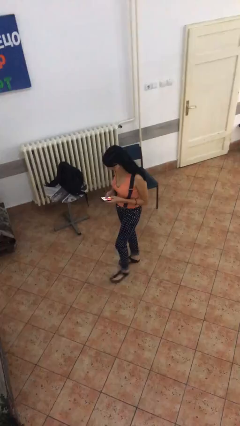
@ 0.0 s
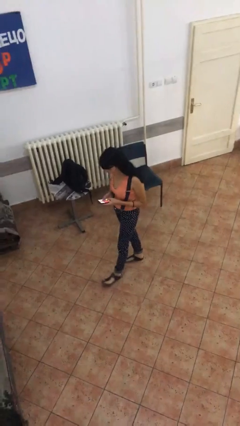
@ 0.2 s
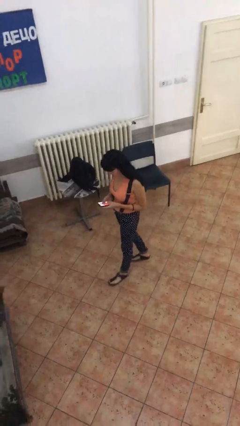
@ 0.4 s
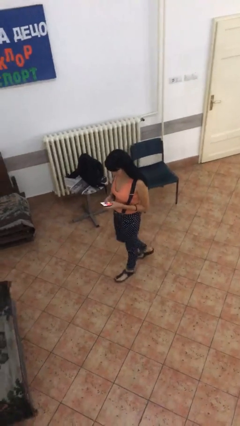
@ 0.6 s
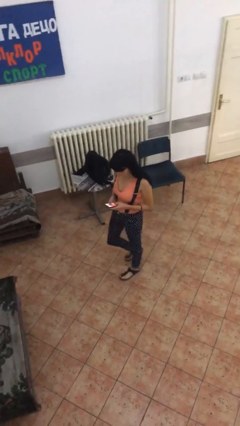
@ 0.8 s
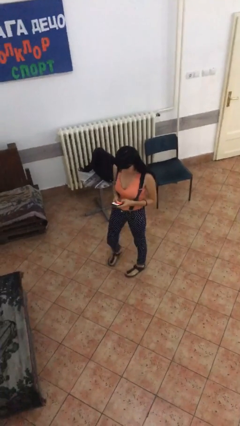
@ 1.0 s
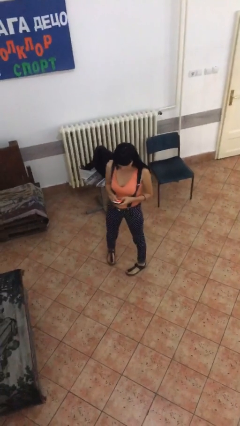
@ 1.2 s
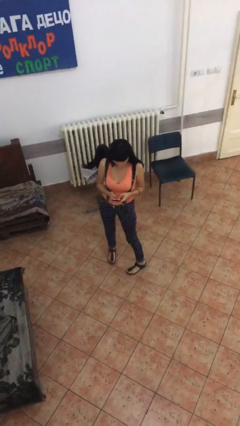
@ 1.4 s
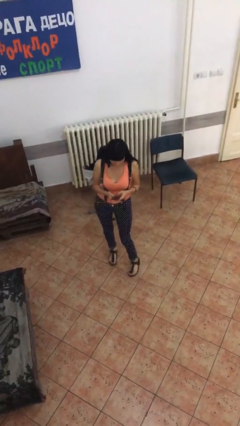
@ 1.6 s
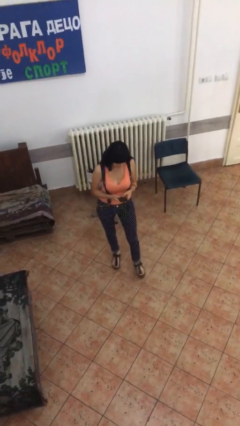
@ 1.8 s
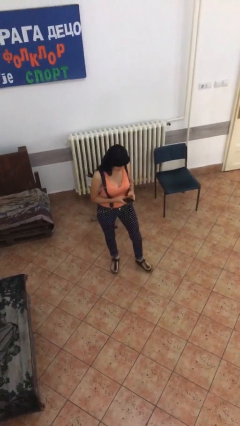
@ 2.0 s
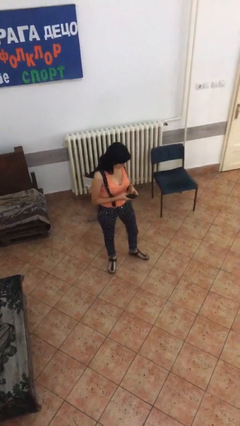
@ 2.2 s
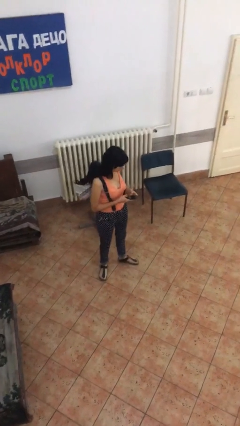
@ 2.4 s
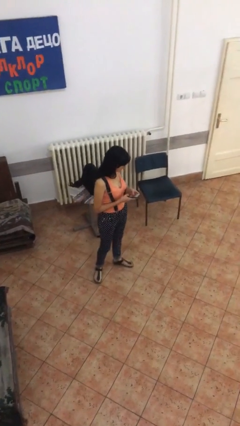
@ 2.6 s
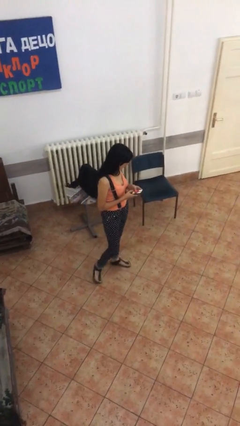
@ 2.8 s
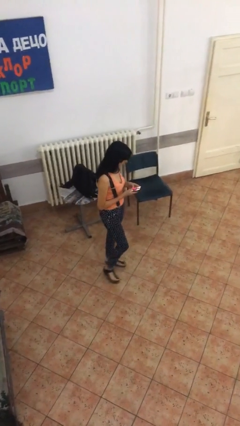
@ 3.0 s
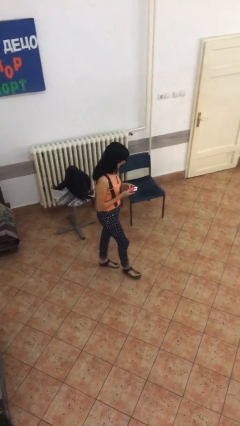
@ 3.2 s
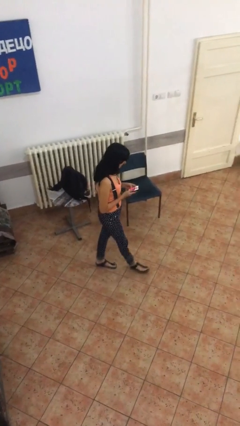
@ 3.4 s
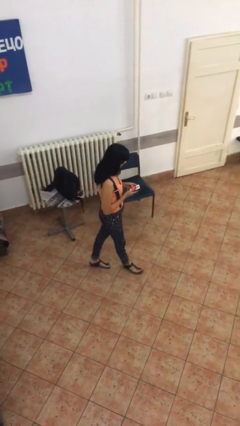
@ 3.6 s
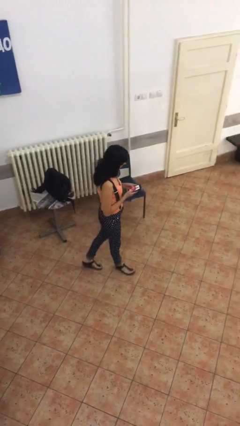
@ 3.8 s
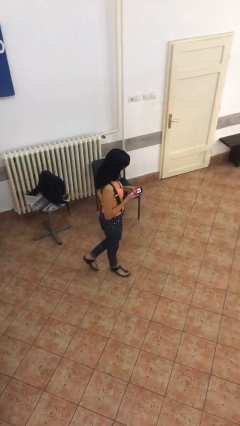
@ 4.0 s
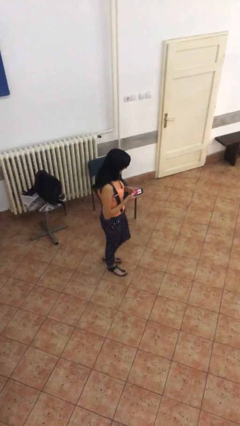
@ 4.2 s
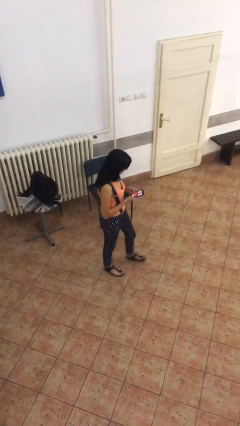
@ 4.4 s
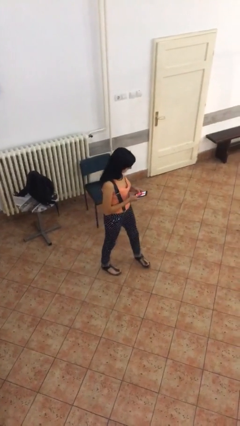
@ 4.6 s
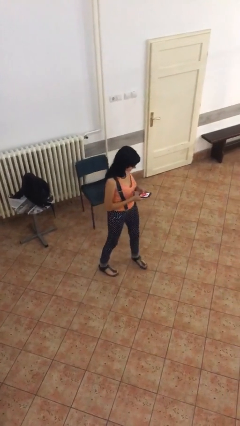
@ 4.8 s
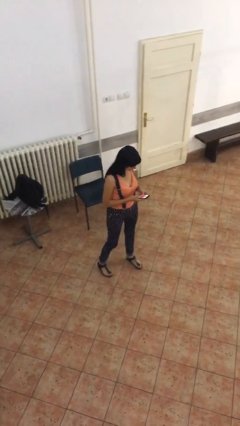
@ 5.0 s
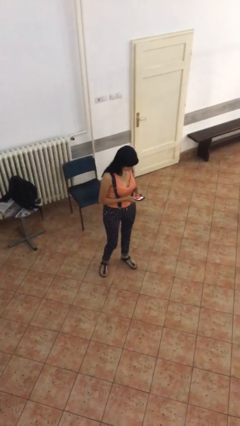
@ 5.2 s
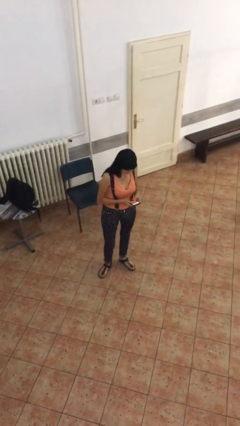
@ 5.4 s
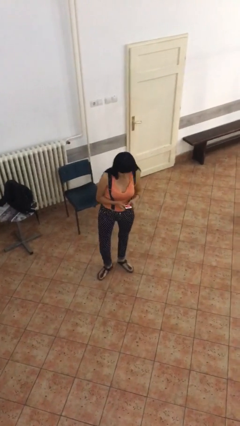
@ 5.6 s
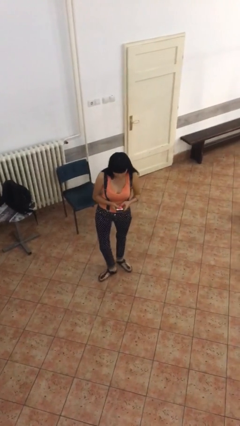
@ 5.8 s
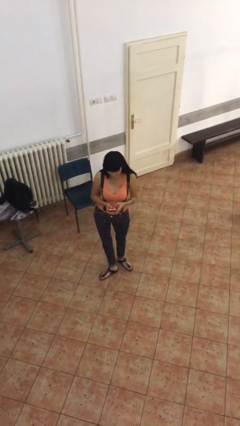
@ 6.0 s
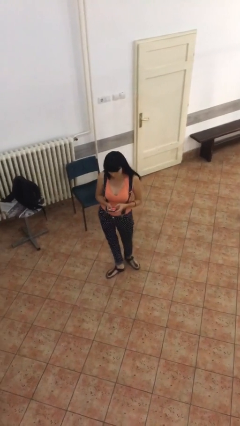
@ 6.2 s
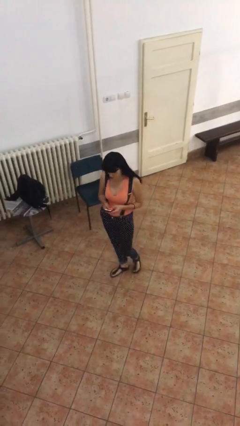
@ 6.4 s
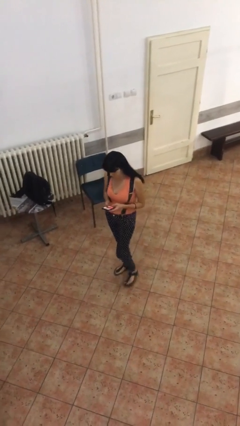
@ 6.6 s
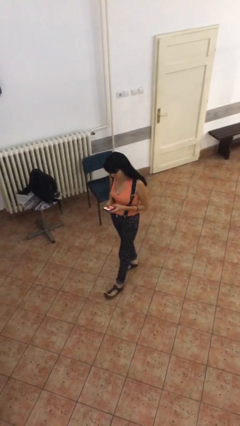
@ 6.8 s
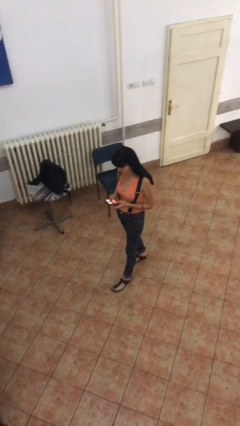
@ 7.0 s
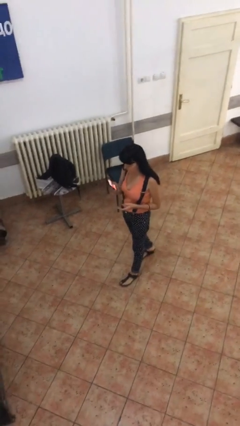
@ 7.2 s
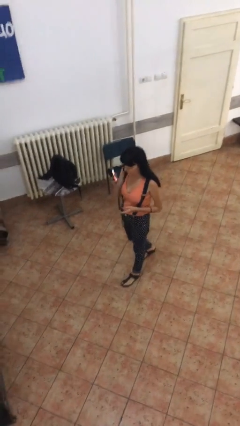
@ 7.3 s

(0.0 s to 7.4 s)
person texts on phone

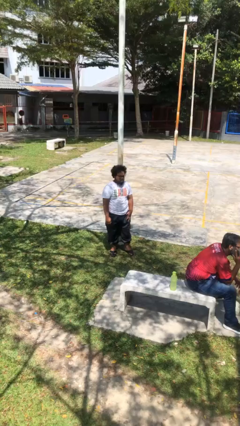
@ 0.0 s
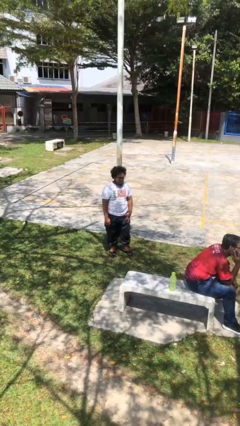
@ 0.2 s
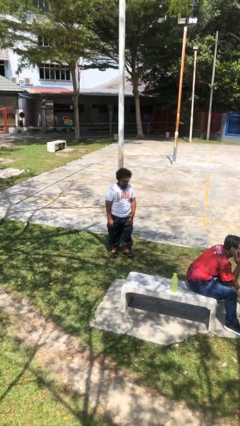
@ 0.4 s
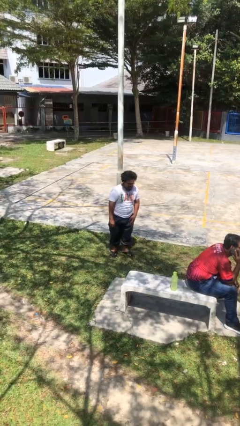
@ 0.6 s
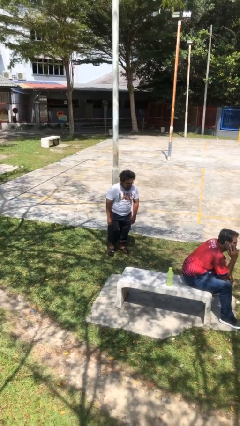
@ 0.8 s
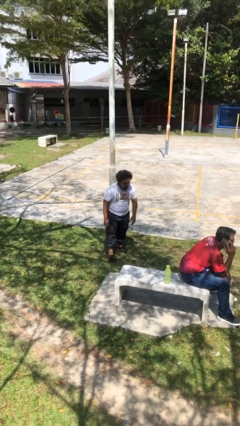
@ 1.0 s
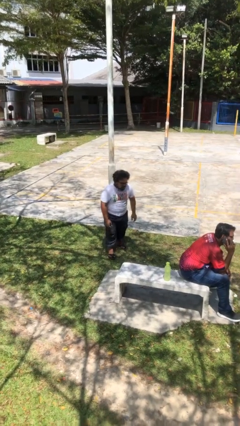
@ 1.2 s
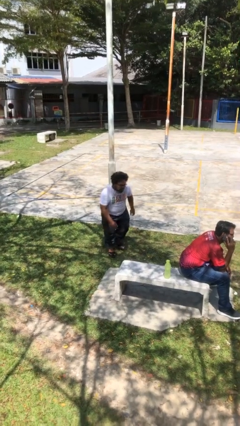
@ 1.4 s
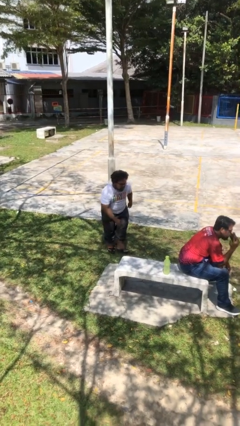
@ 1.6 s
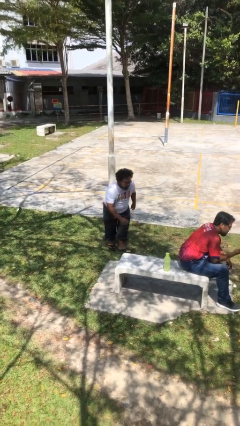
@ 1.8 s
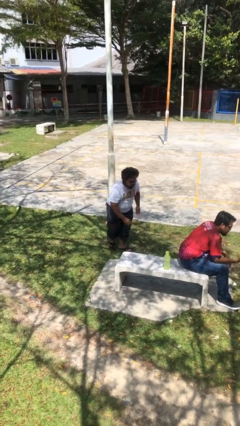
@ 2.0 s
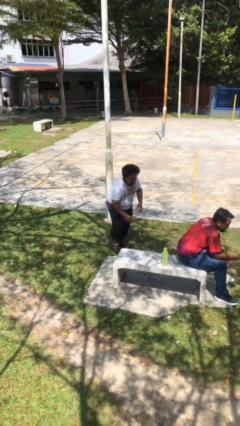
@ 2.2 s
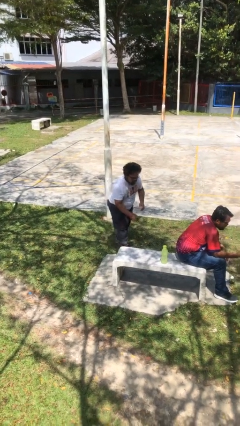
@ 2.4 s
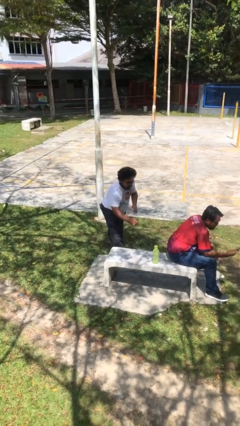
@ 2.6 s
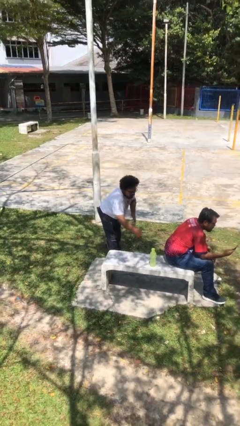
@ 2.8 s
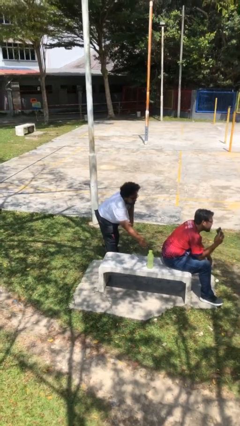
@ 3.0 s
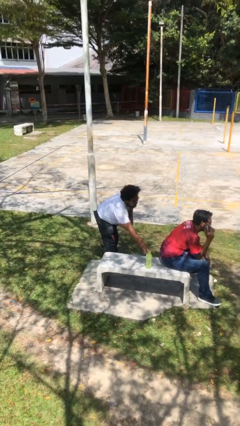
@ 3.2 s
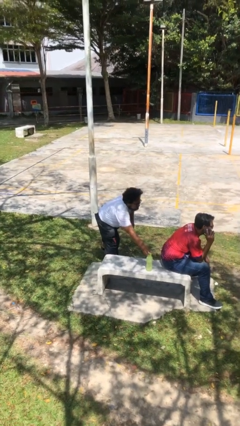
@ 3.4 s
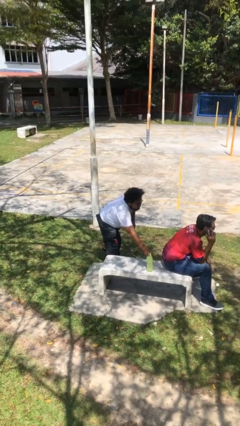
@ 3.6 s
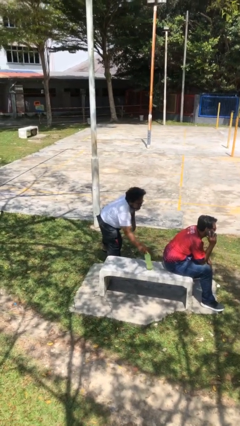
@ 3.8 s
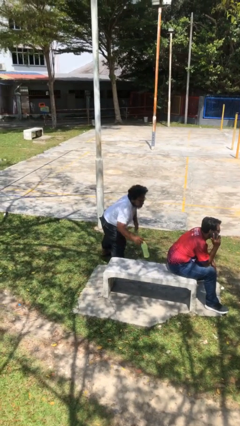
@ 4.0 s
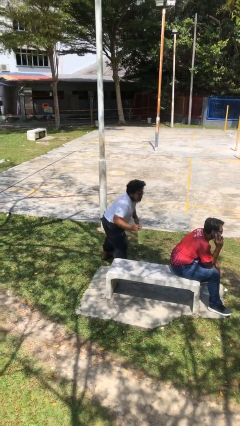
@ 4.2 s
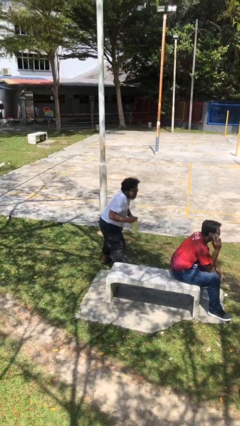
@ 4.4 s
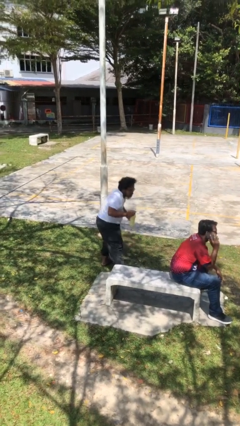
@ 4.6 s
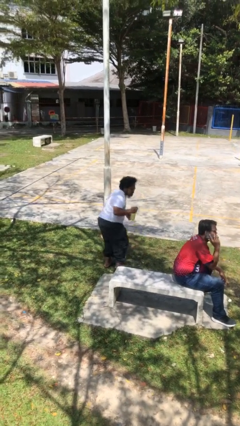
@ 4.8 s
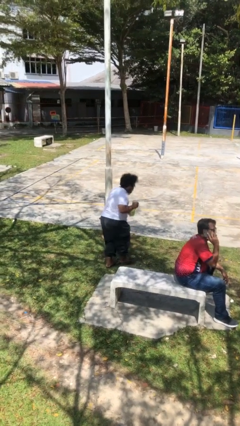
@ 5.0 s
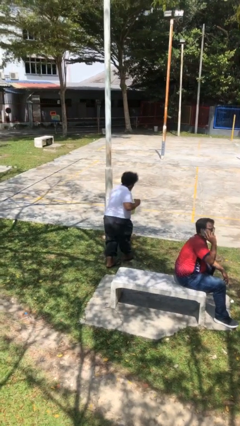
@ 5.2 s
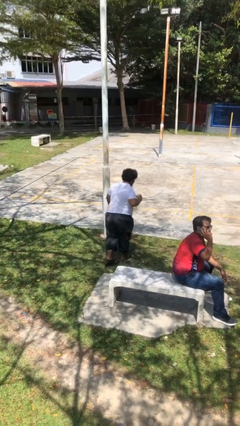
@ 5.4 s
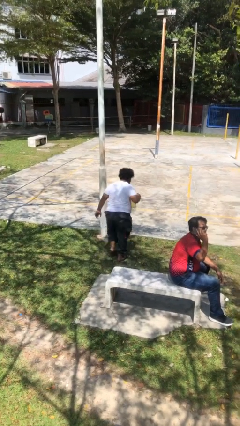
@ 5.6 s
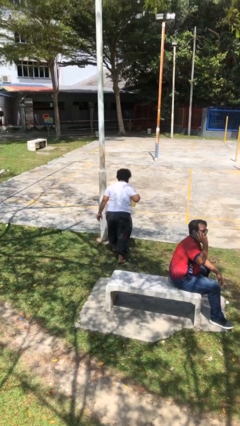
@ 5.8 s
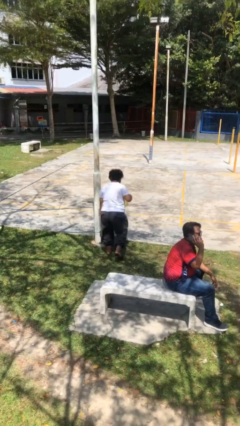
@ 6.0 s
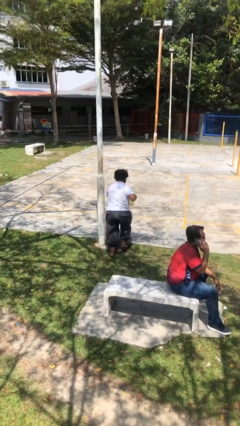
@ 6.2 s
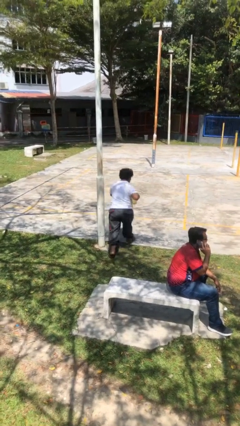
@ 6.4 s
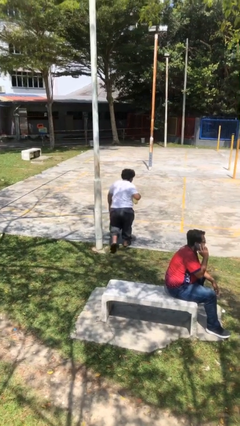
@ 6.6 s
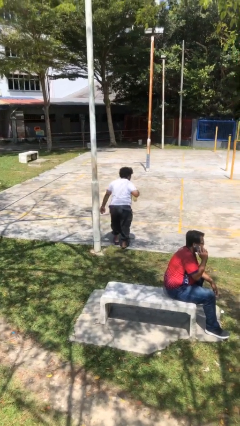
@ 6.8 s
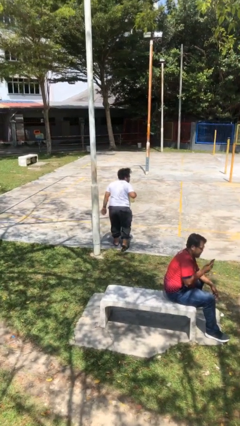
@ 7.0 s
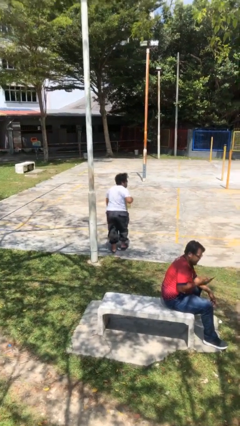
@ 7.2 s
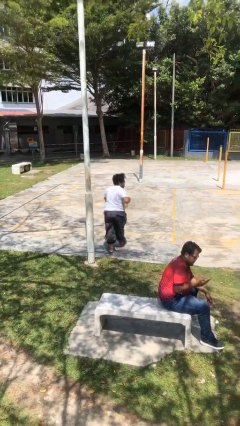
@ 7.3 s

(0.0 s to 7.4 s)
person steals object from person

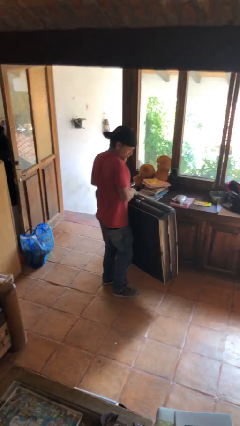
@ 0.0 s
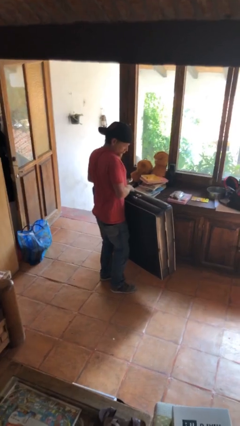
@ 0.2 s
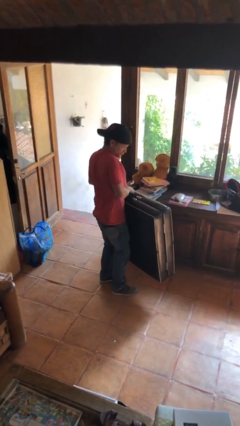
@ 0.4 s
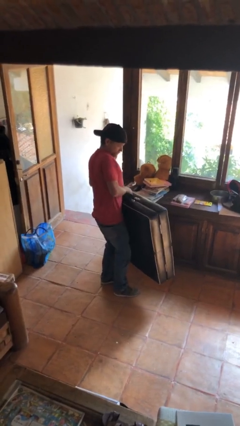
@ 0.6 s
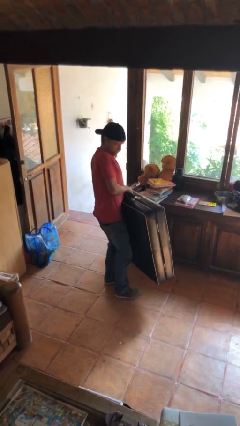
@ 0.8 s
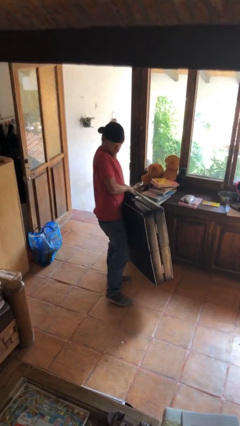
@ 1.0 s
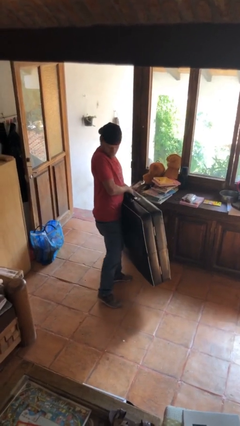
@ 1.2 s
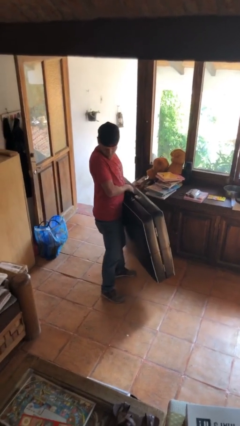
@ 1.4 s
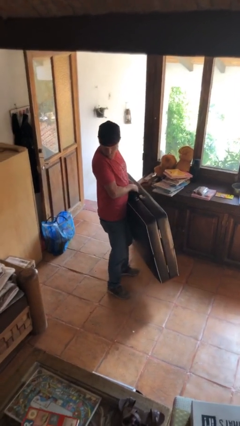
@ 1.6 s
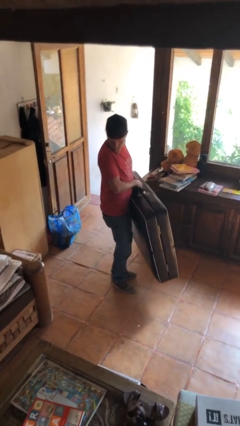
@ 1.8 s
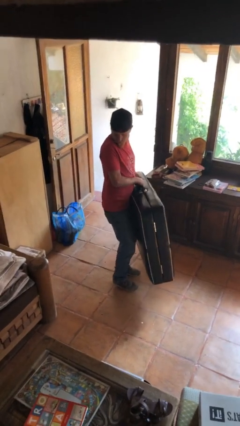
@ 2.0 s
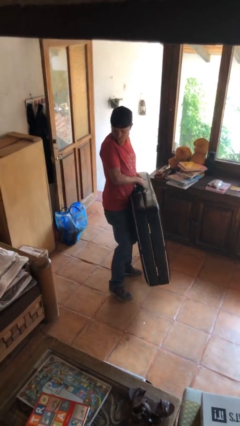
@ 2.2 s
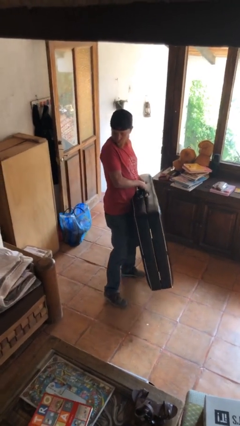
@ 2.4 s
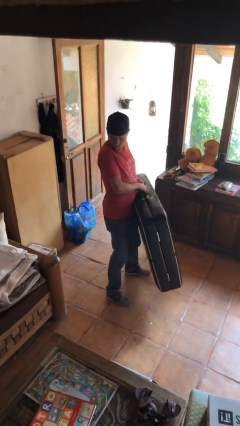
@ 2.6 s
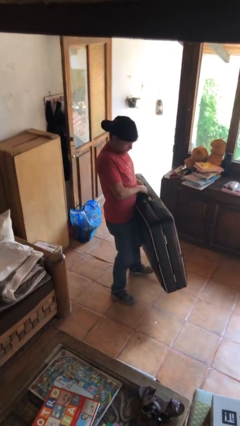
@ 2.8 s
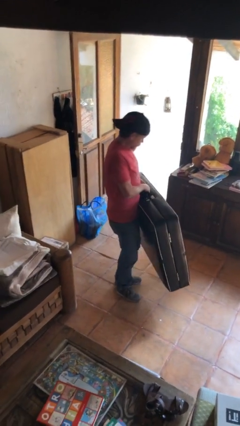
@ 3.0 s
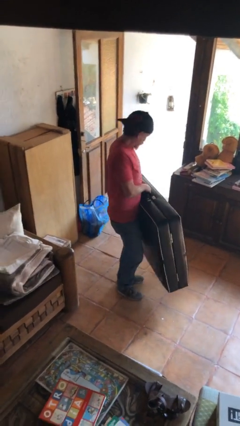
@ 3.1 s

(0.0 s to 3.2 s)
person carries heavy object
